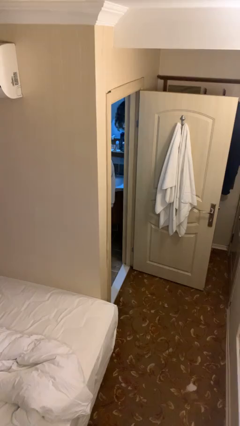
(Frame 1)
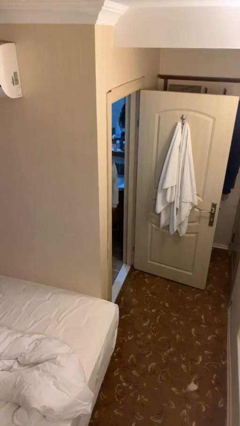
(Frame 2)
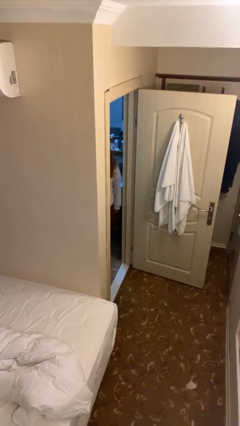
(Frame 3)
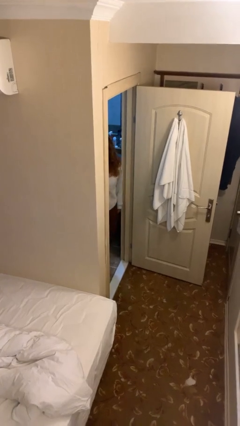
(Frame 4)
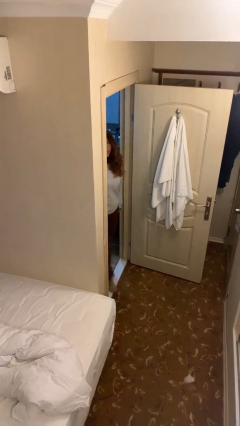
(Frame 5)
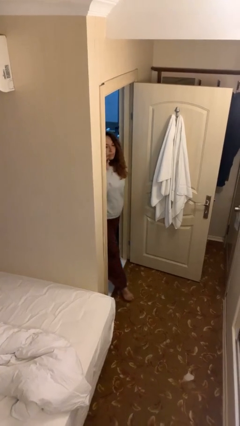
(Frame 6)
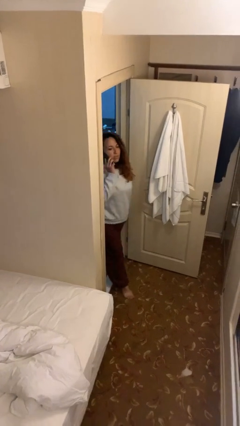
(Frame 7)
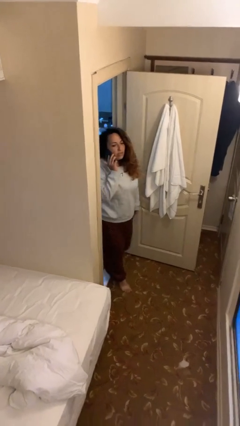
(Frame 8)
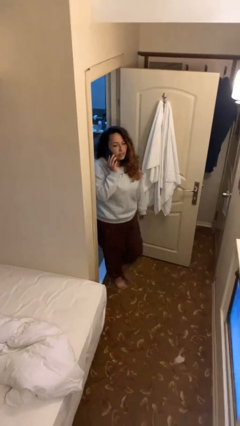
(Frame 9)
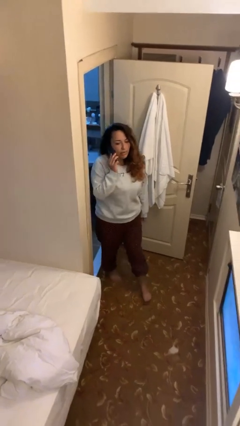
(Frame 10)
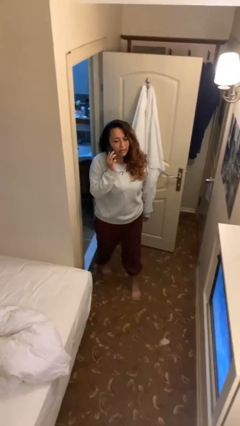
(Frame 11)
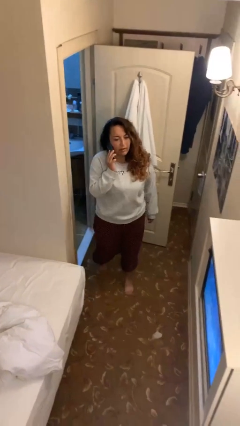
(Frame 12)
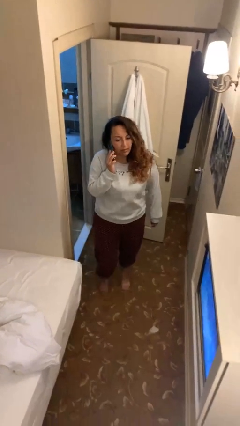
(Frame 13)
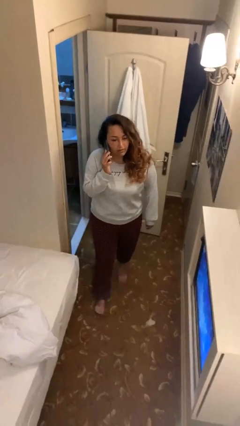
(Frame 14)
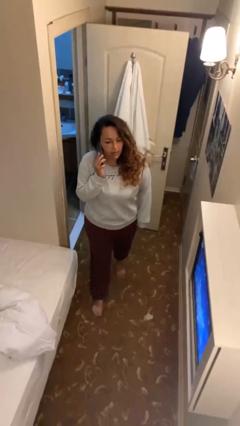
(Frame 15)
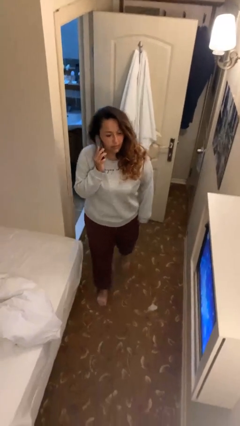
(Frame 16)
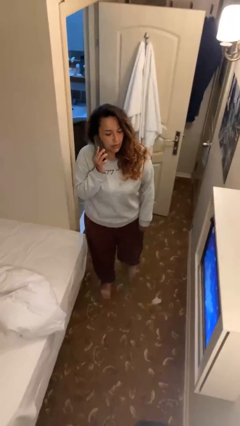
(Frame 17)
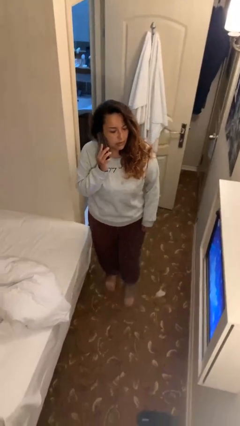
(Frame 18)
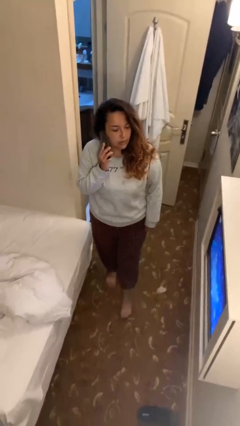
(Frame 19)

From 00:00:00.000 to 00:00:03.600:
person enters scene through structure

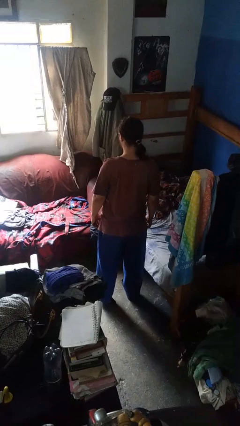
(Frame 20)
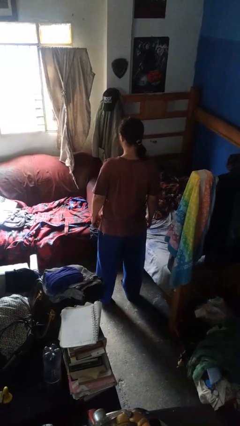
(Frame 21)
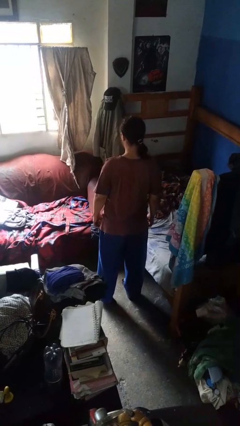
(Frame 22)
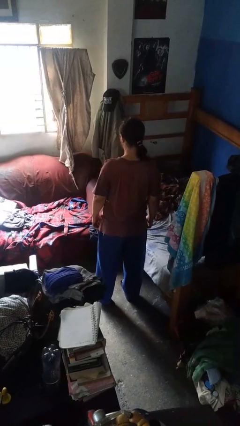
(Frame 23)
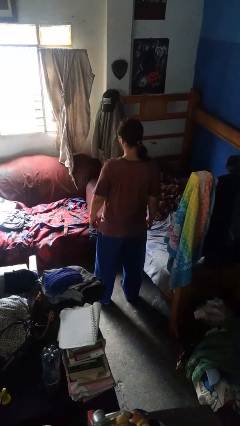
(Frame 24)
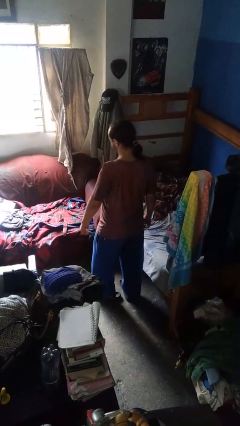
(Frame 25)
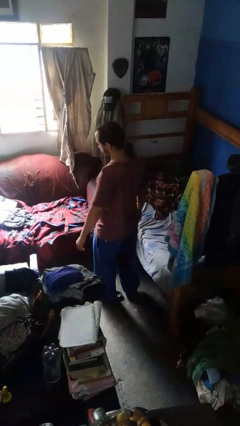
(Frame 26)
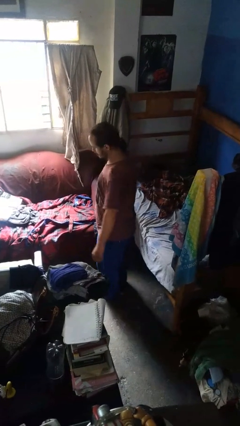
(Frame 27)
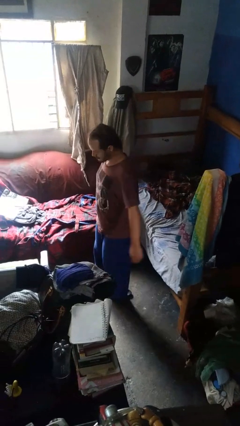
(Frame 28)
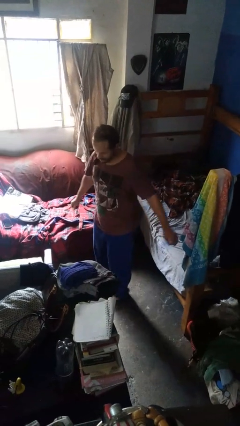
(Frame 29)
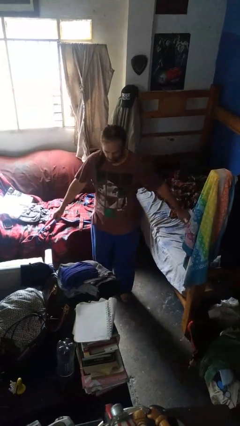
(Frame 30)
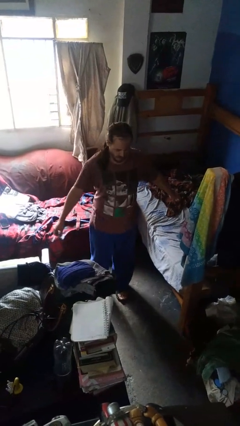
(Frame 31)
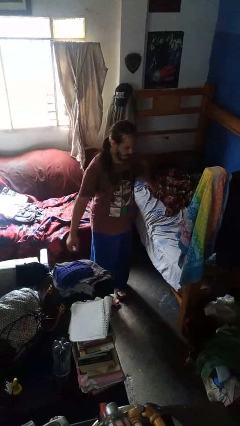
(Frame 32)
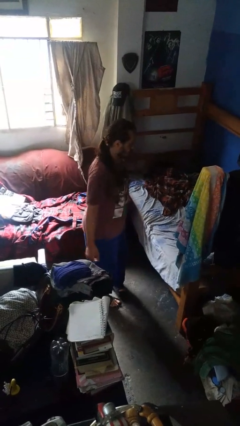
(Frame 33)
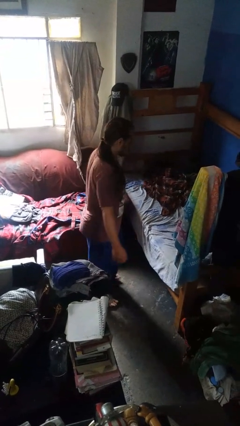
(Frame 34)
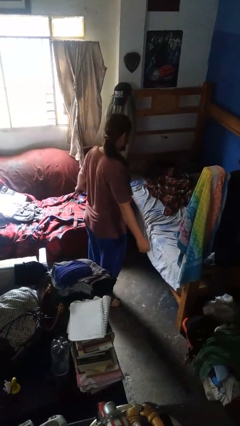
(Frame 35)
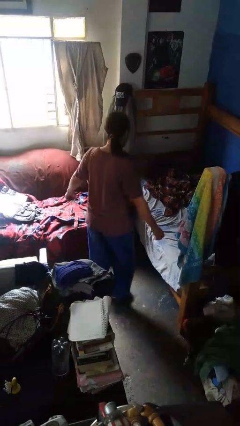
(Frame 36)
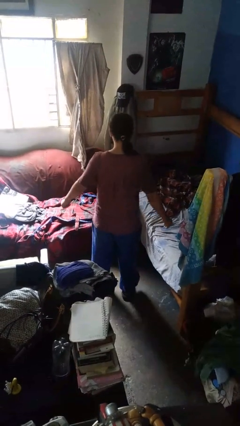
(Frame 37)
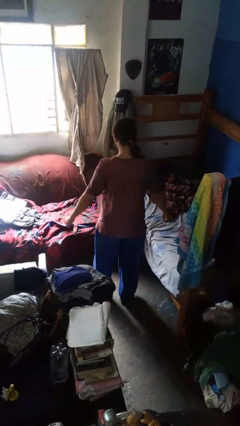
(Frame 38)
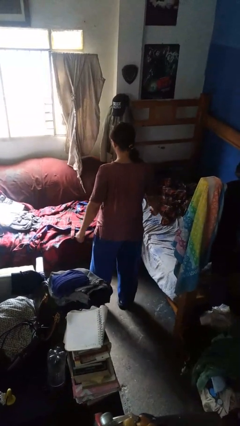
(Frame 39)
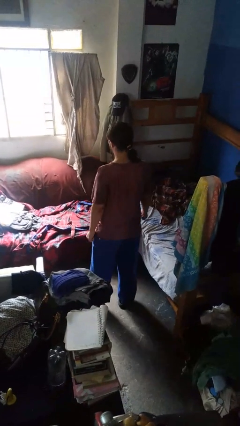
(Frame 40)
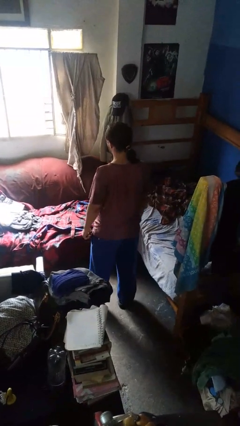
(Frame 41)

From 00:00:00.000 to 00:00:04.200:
person twirls

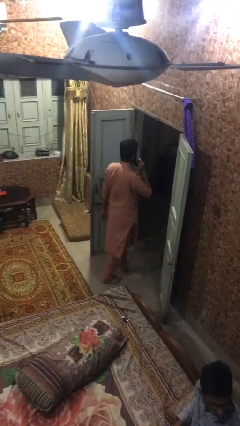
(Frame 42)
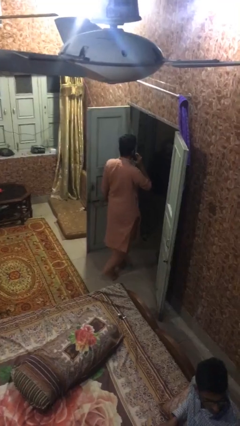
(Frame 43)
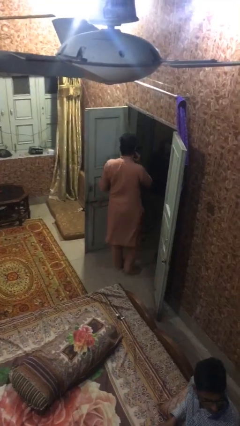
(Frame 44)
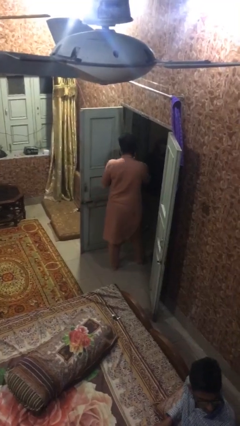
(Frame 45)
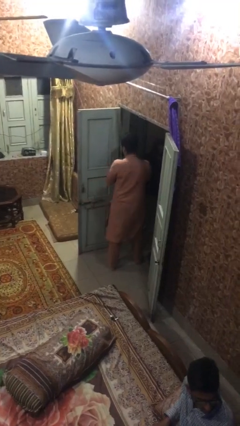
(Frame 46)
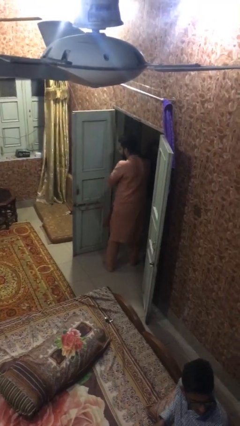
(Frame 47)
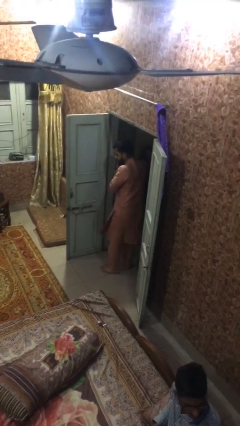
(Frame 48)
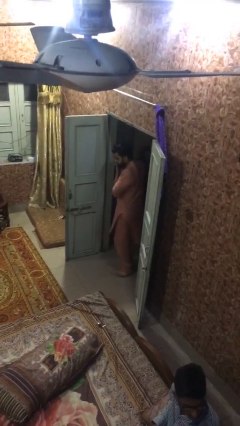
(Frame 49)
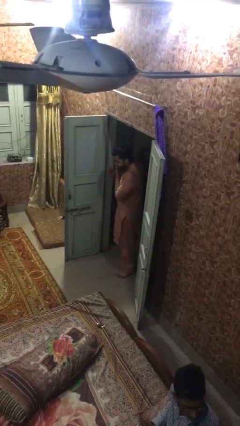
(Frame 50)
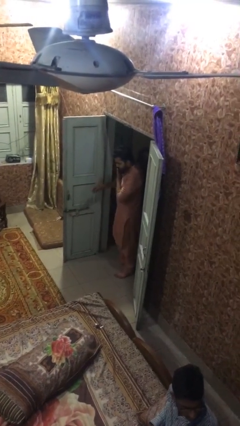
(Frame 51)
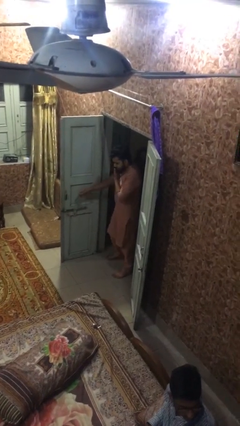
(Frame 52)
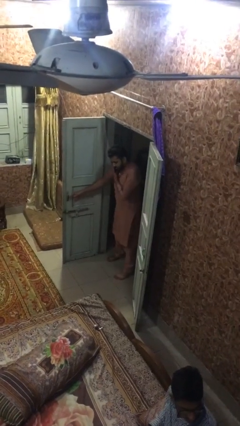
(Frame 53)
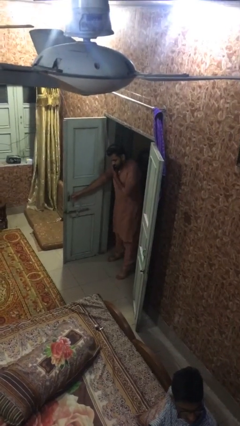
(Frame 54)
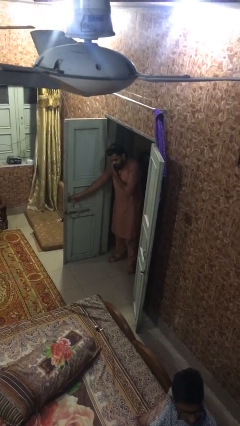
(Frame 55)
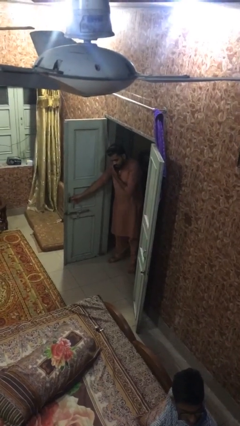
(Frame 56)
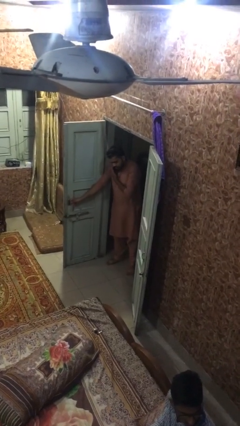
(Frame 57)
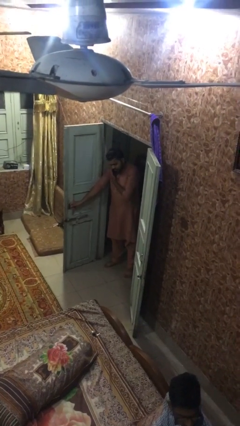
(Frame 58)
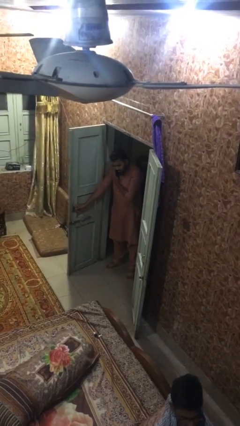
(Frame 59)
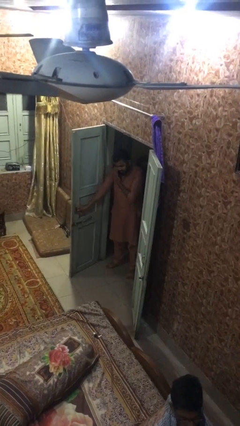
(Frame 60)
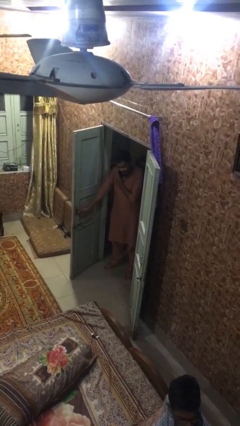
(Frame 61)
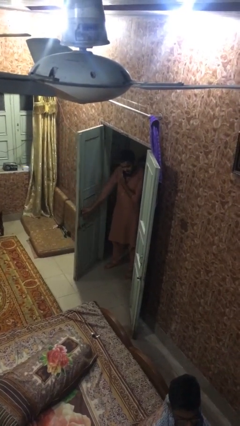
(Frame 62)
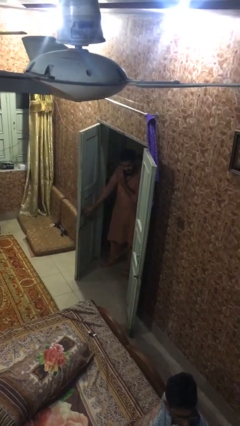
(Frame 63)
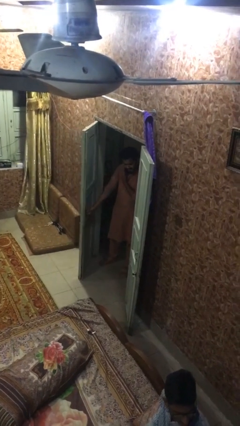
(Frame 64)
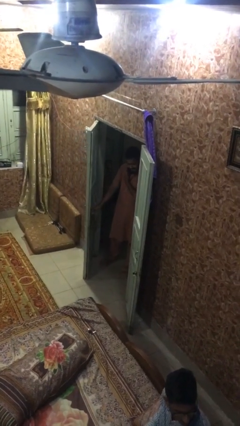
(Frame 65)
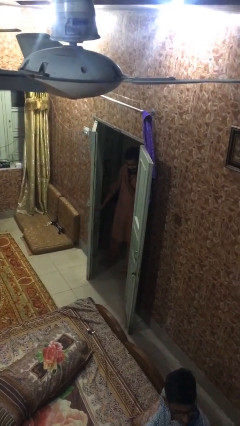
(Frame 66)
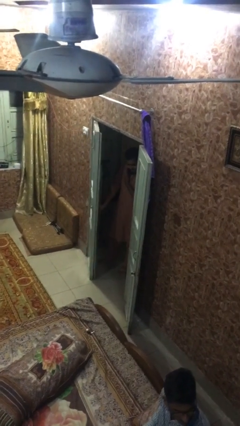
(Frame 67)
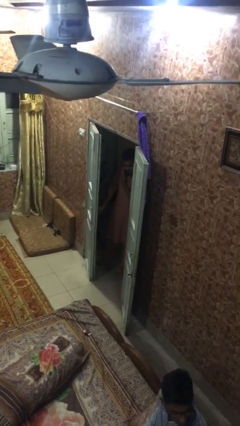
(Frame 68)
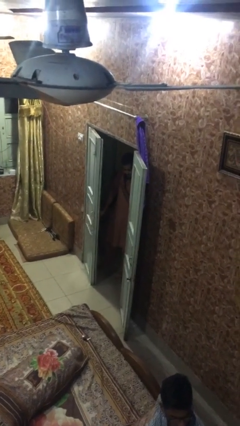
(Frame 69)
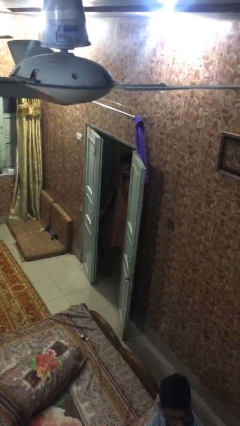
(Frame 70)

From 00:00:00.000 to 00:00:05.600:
person exits scene through structure

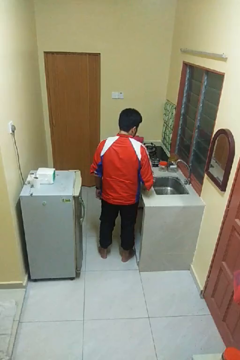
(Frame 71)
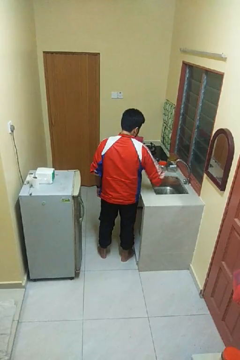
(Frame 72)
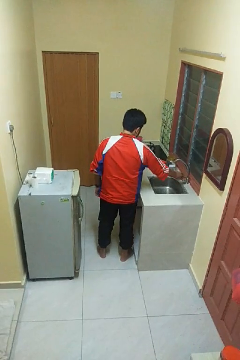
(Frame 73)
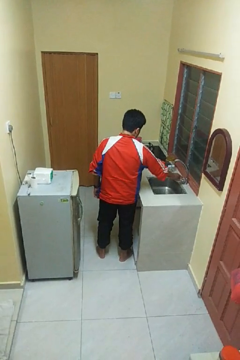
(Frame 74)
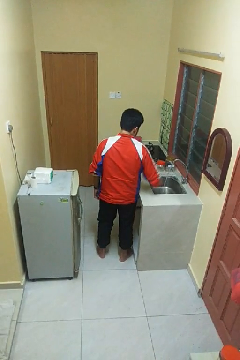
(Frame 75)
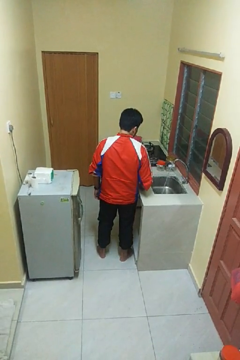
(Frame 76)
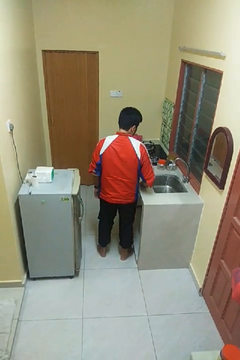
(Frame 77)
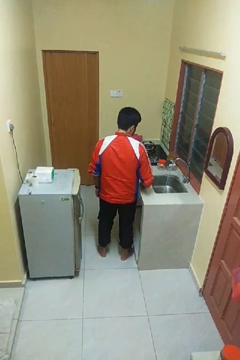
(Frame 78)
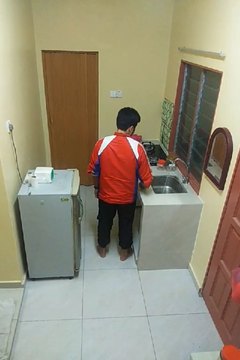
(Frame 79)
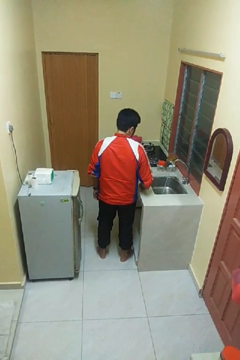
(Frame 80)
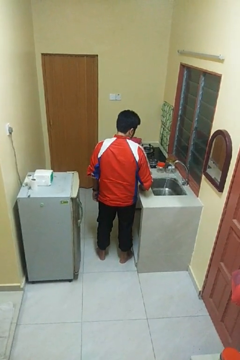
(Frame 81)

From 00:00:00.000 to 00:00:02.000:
person turns on faucet

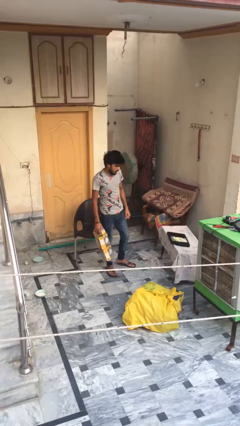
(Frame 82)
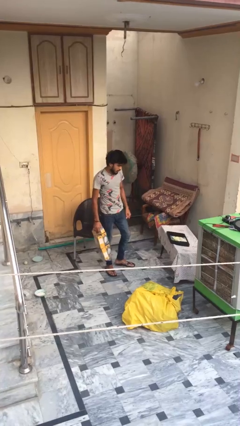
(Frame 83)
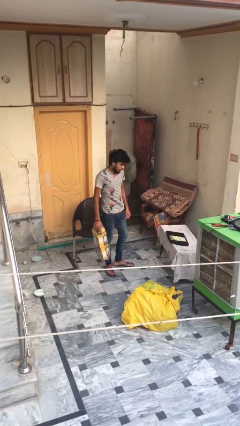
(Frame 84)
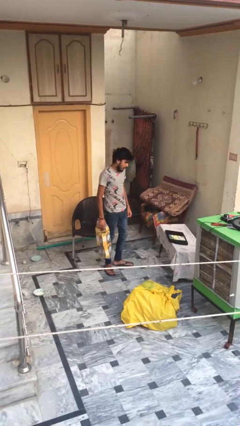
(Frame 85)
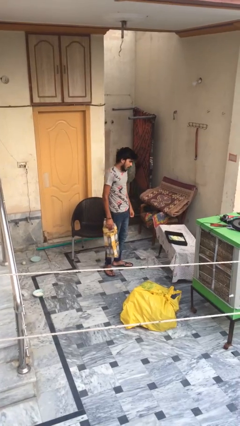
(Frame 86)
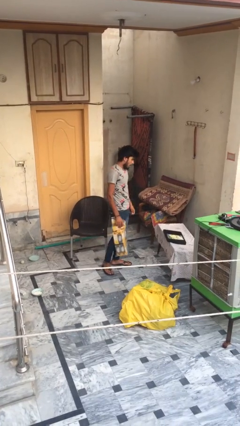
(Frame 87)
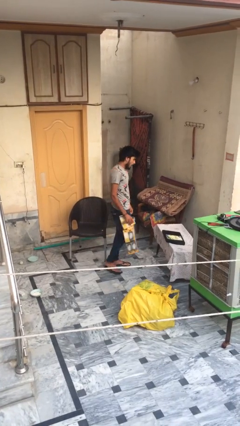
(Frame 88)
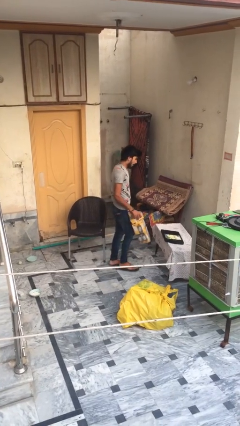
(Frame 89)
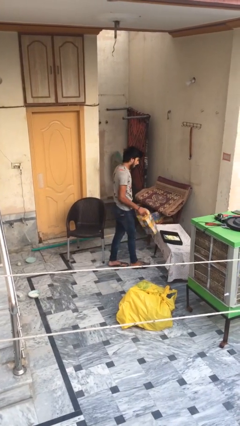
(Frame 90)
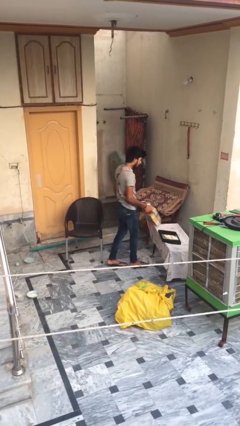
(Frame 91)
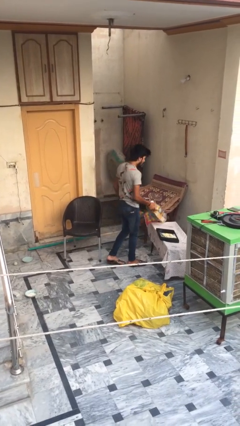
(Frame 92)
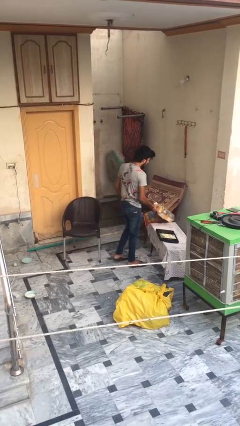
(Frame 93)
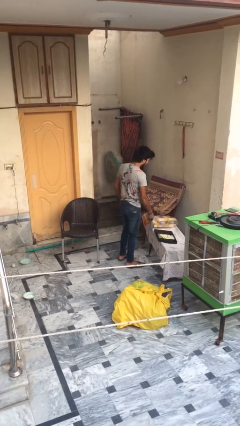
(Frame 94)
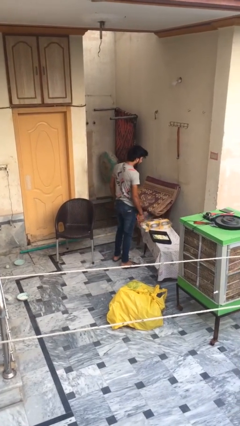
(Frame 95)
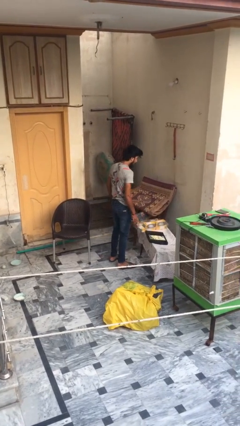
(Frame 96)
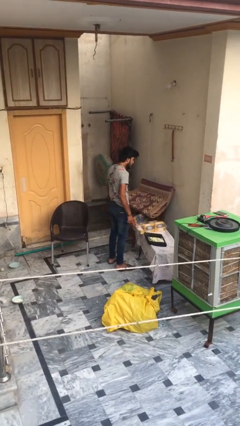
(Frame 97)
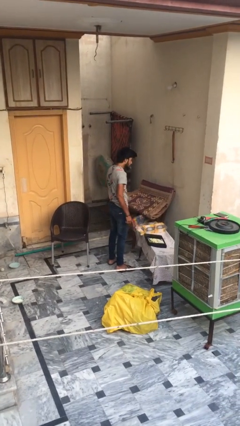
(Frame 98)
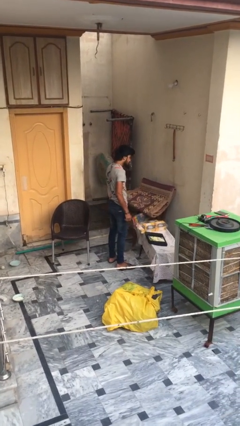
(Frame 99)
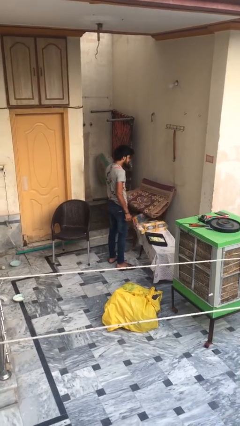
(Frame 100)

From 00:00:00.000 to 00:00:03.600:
person puts down object on table
